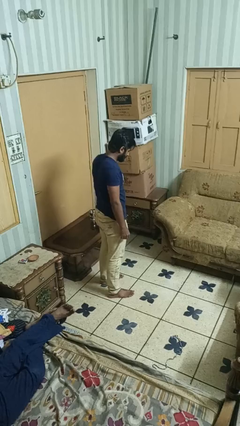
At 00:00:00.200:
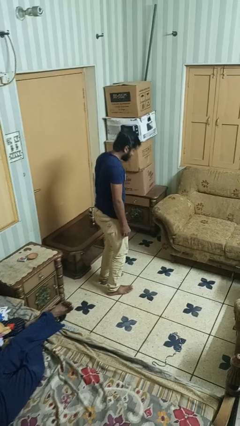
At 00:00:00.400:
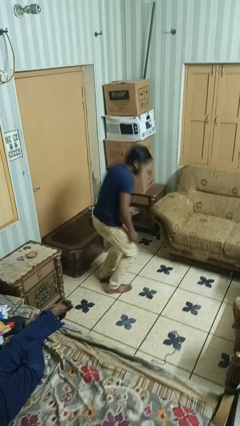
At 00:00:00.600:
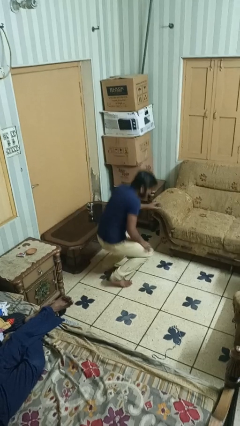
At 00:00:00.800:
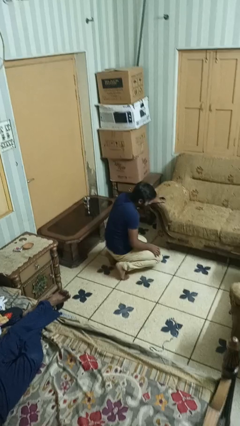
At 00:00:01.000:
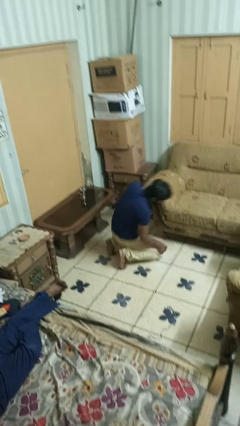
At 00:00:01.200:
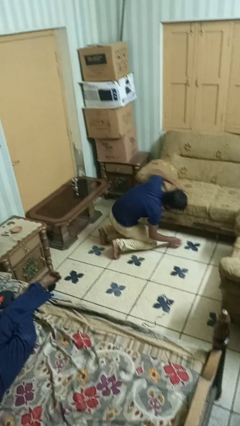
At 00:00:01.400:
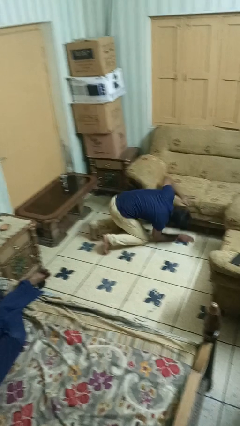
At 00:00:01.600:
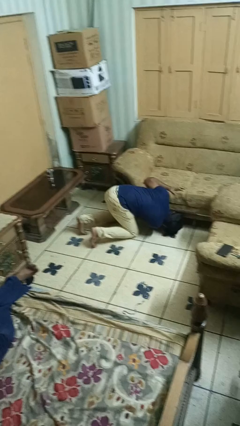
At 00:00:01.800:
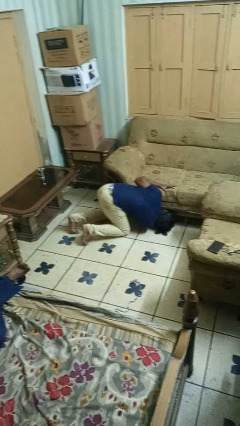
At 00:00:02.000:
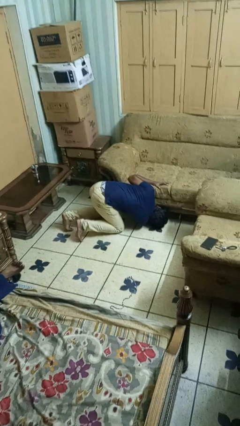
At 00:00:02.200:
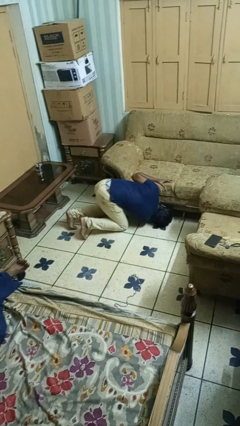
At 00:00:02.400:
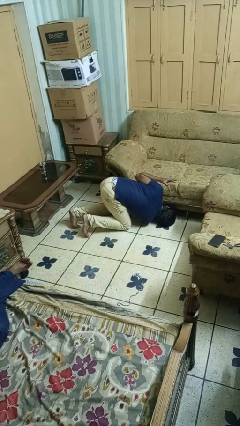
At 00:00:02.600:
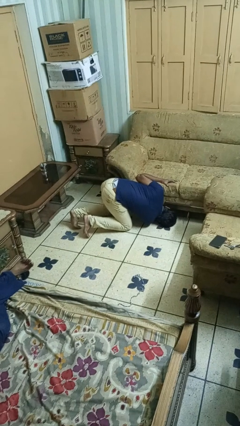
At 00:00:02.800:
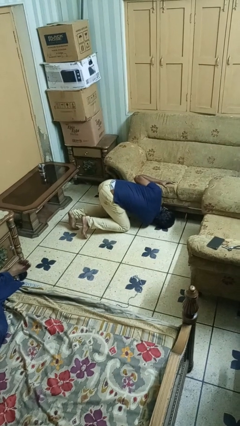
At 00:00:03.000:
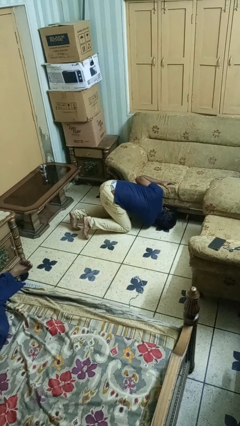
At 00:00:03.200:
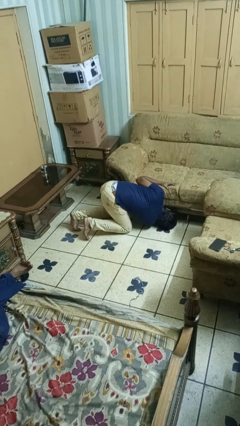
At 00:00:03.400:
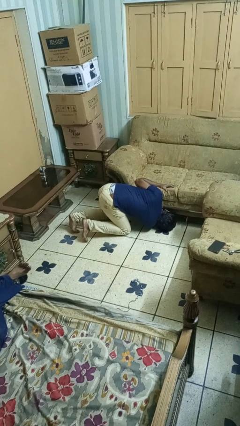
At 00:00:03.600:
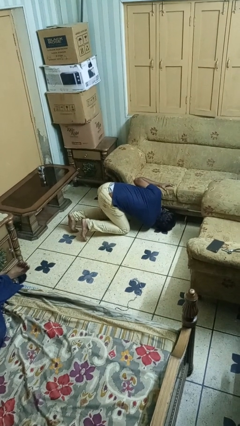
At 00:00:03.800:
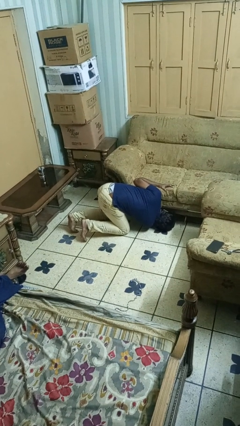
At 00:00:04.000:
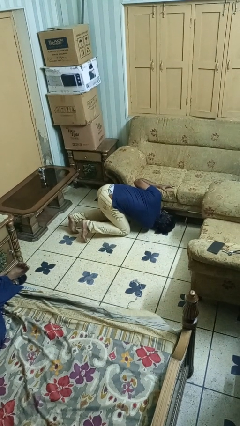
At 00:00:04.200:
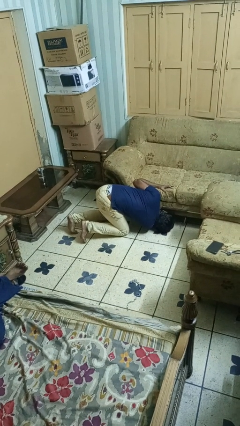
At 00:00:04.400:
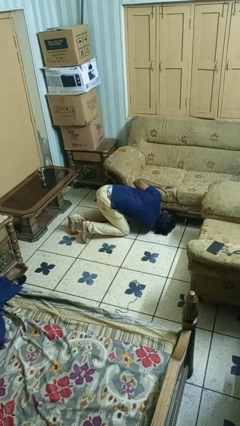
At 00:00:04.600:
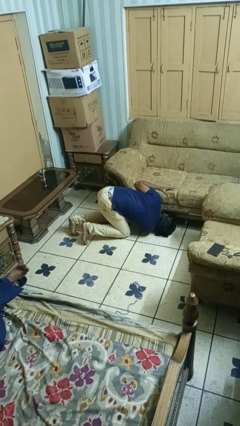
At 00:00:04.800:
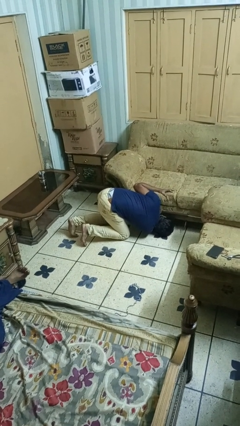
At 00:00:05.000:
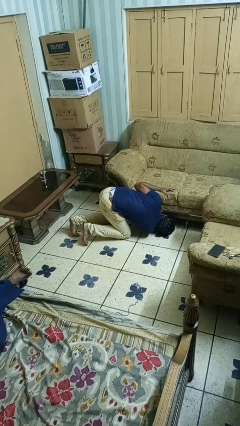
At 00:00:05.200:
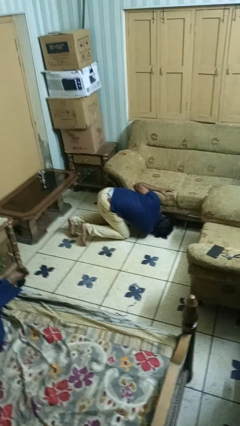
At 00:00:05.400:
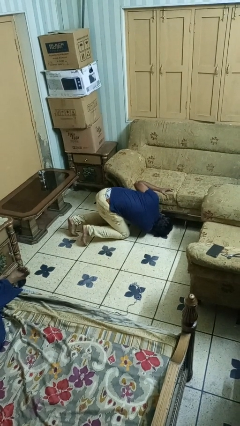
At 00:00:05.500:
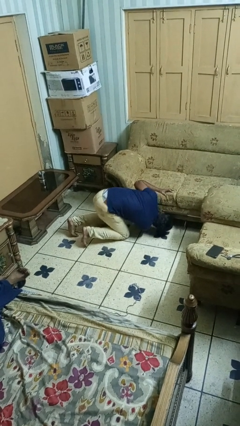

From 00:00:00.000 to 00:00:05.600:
person searches under couch

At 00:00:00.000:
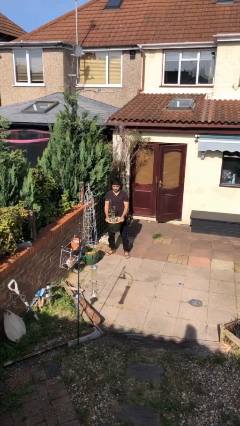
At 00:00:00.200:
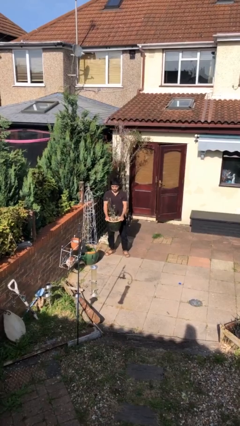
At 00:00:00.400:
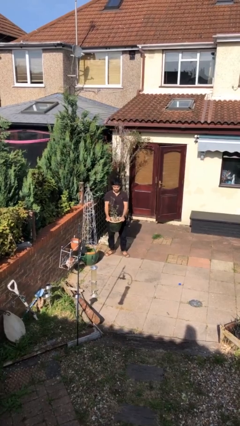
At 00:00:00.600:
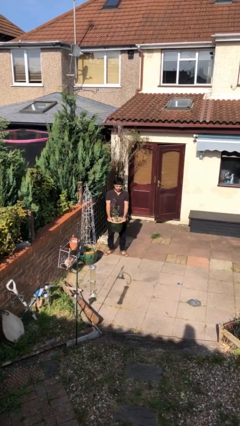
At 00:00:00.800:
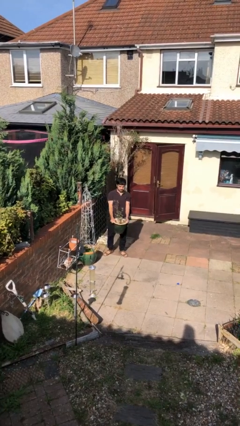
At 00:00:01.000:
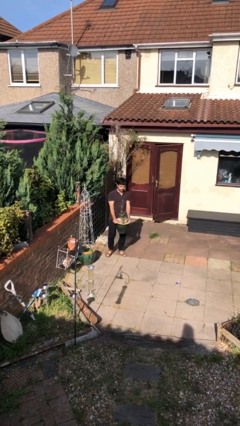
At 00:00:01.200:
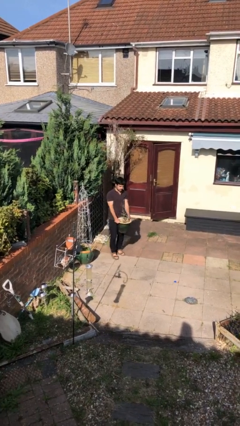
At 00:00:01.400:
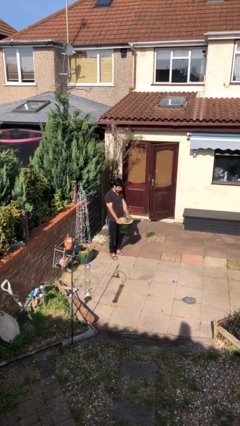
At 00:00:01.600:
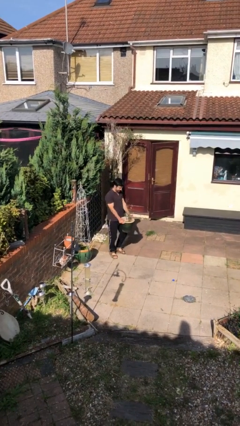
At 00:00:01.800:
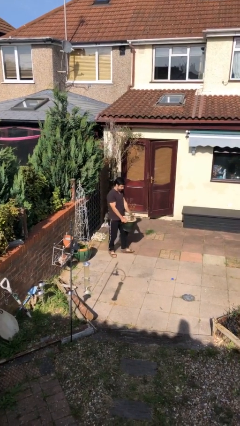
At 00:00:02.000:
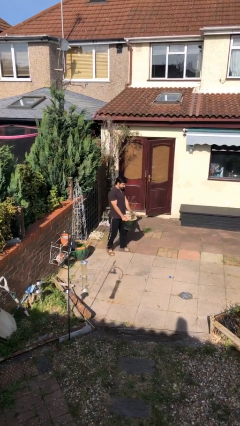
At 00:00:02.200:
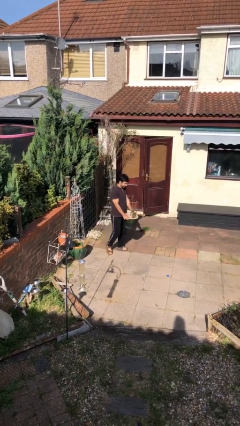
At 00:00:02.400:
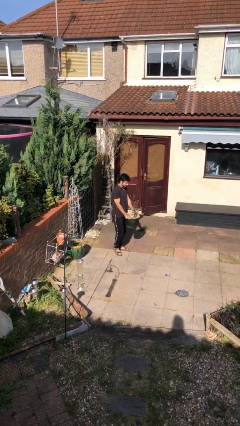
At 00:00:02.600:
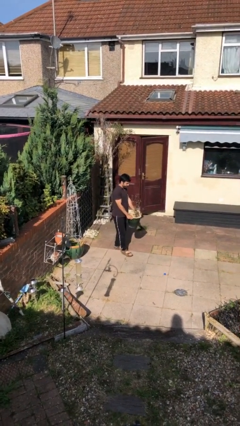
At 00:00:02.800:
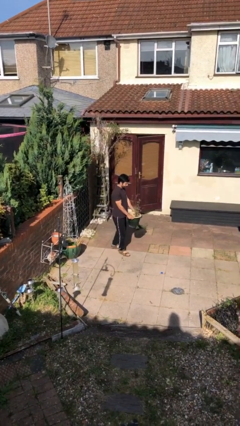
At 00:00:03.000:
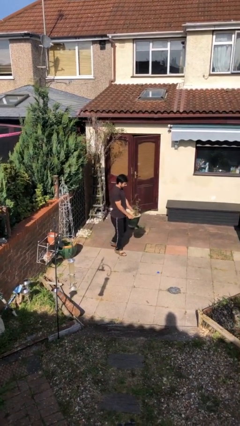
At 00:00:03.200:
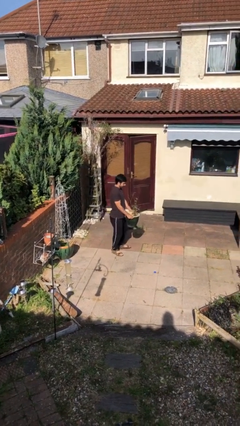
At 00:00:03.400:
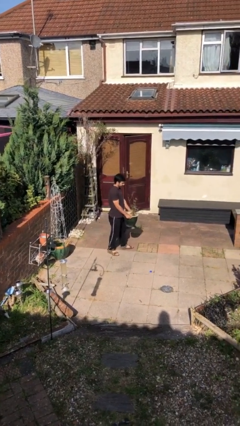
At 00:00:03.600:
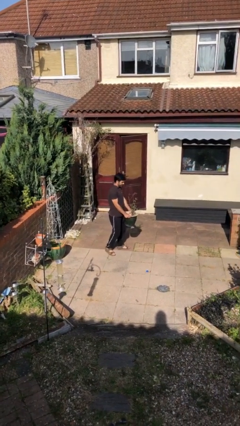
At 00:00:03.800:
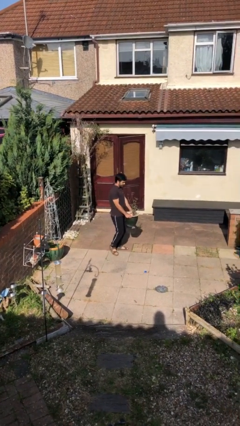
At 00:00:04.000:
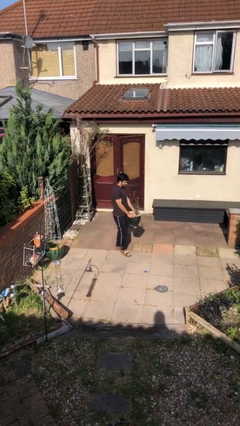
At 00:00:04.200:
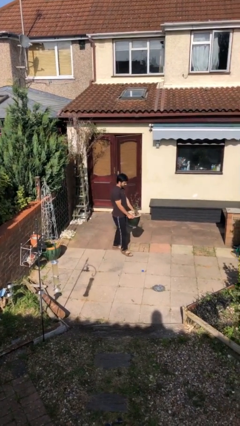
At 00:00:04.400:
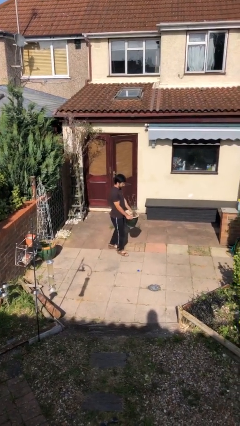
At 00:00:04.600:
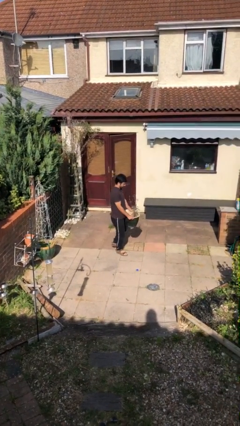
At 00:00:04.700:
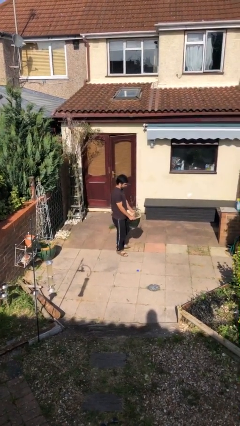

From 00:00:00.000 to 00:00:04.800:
person carries heavy object

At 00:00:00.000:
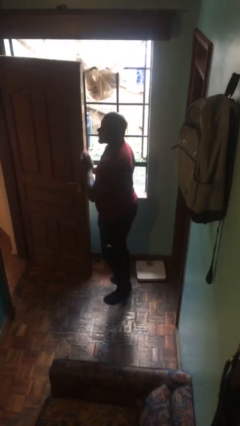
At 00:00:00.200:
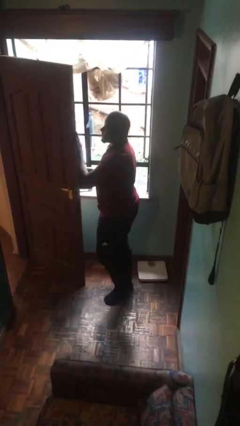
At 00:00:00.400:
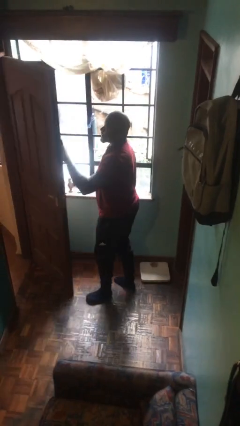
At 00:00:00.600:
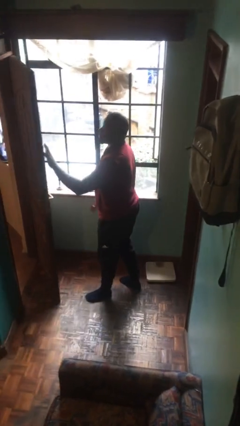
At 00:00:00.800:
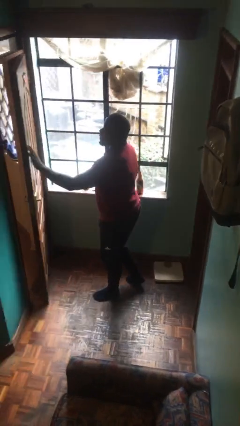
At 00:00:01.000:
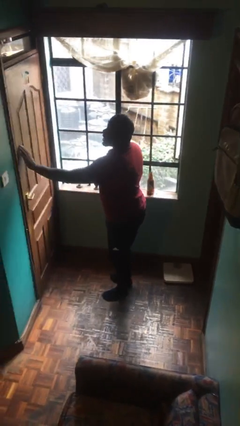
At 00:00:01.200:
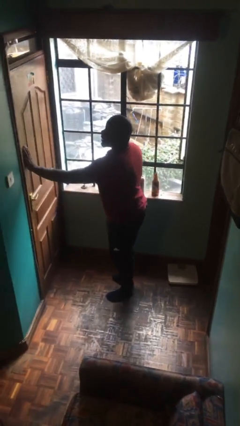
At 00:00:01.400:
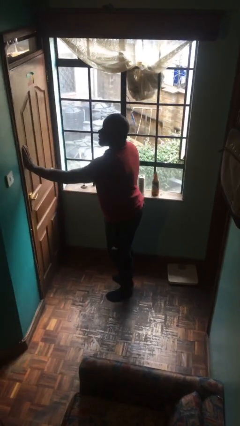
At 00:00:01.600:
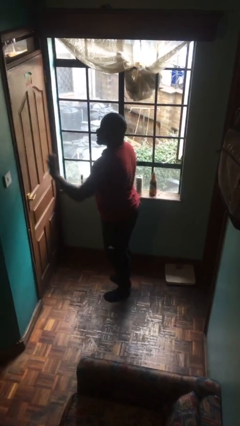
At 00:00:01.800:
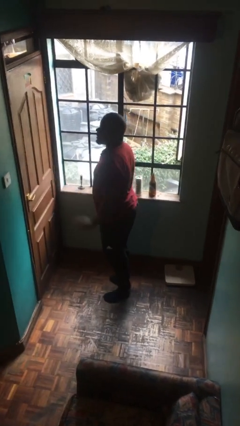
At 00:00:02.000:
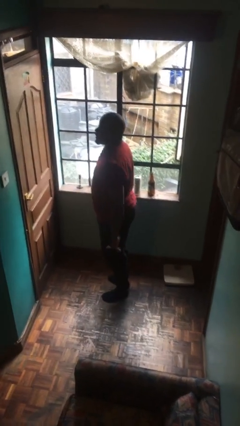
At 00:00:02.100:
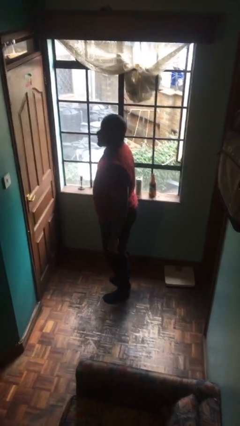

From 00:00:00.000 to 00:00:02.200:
person closes facility door

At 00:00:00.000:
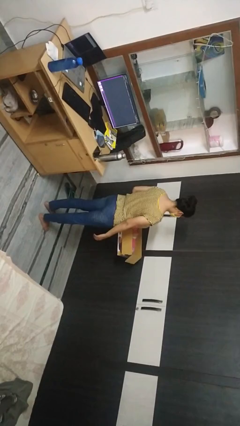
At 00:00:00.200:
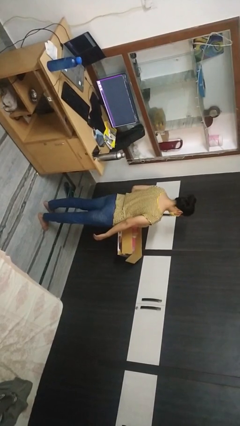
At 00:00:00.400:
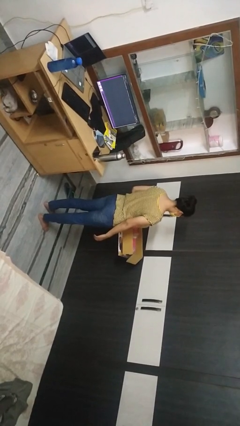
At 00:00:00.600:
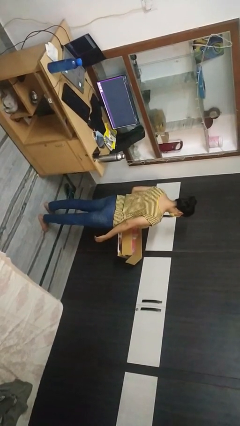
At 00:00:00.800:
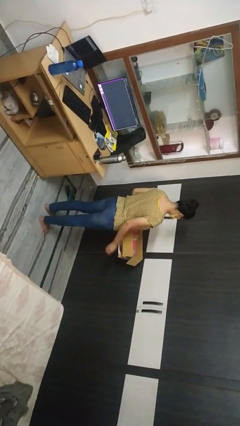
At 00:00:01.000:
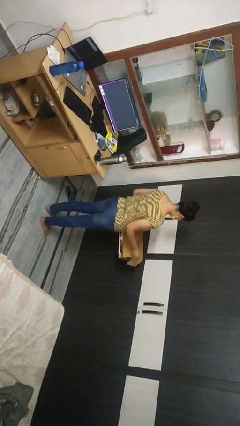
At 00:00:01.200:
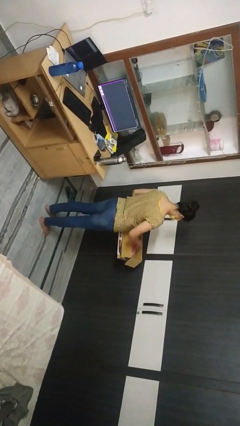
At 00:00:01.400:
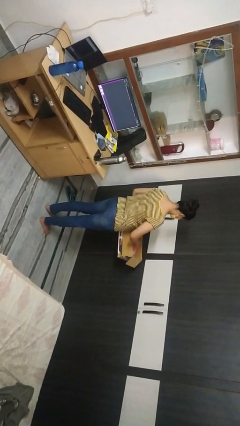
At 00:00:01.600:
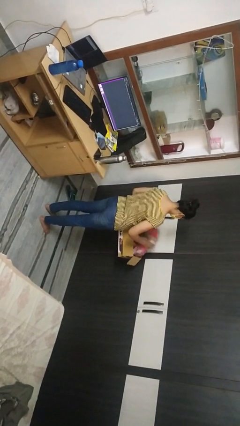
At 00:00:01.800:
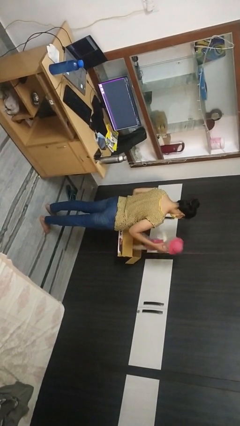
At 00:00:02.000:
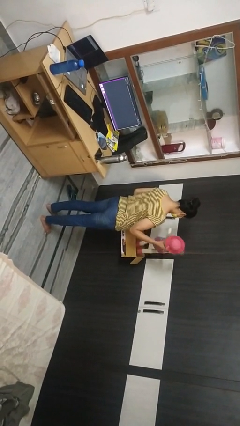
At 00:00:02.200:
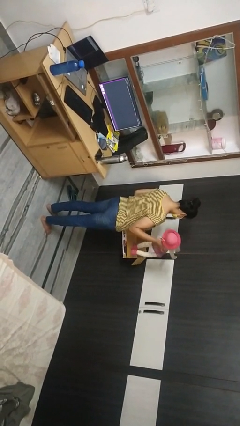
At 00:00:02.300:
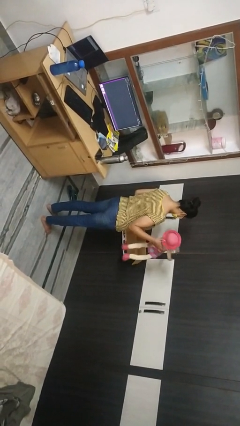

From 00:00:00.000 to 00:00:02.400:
person takes object from box

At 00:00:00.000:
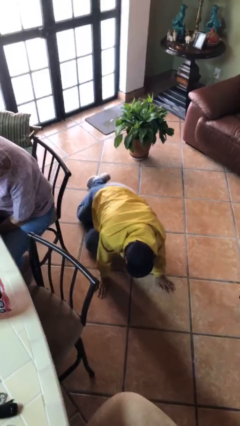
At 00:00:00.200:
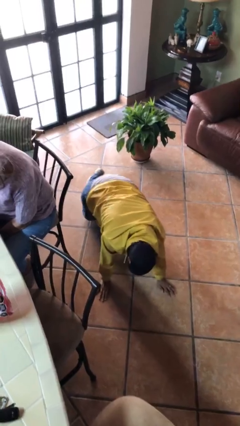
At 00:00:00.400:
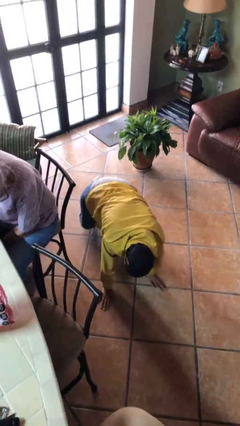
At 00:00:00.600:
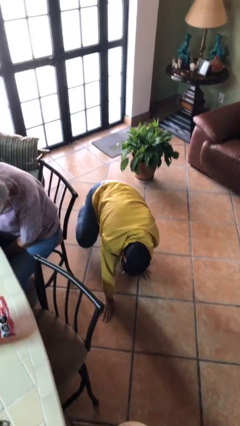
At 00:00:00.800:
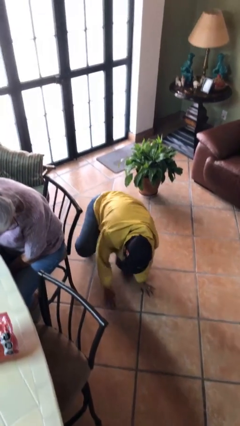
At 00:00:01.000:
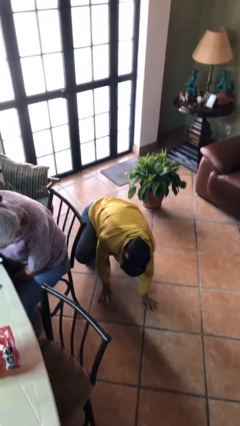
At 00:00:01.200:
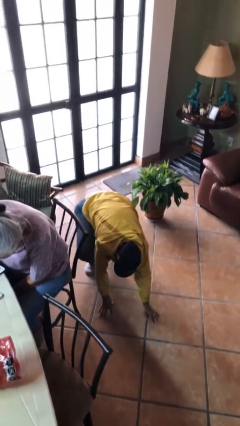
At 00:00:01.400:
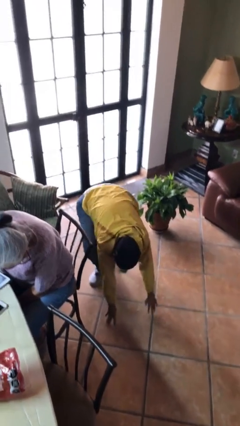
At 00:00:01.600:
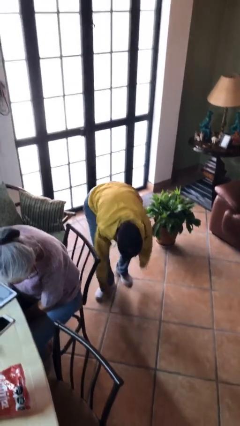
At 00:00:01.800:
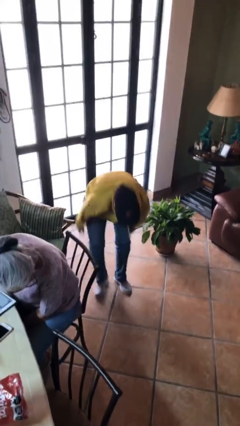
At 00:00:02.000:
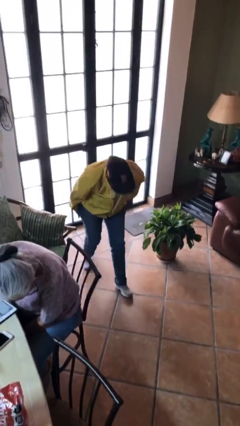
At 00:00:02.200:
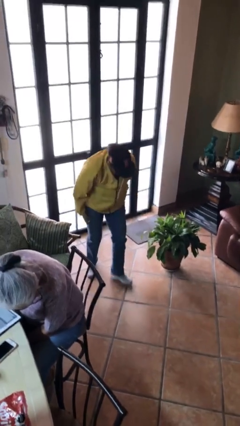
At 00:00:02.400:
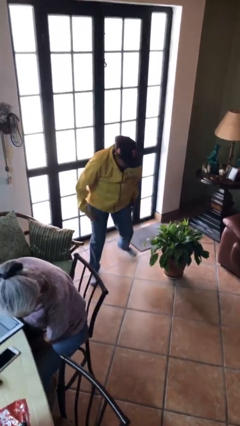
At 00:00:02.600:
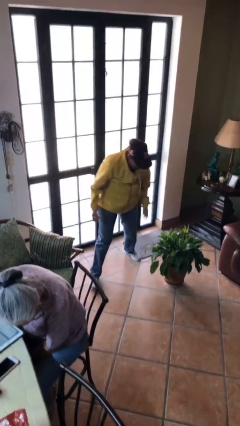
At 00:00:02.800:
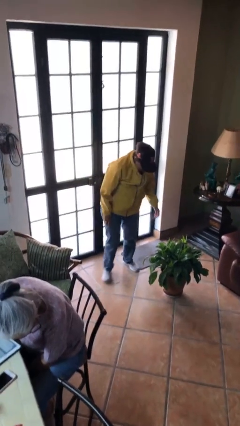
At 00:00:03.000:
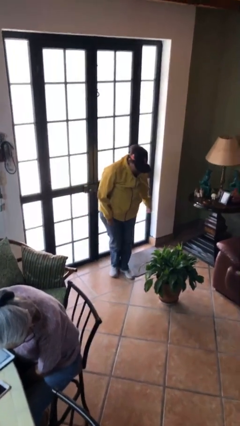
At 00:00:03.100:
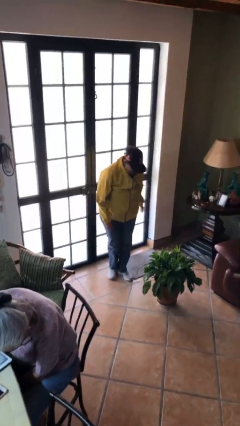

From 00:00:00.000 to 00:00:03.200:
person stands up from floor
